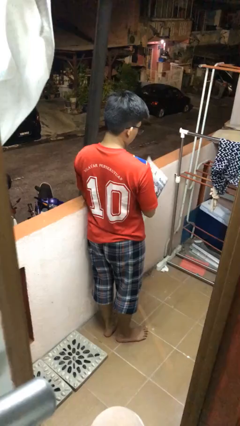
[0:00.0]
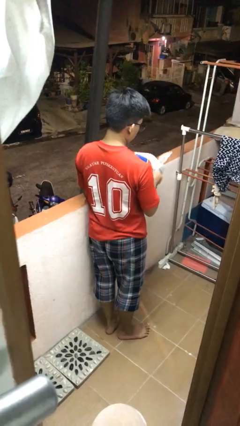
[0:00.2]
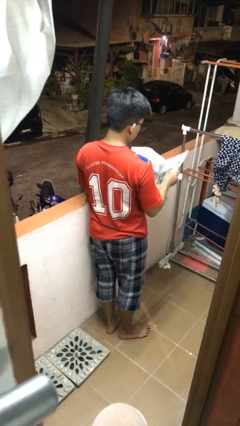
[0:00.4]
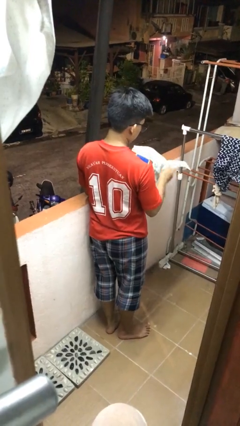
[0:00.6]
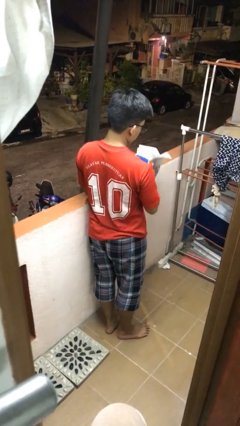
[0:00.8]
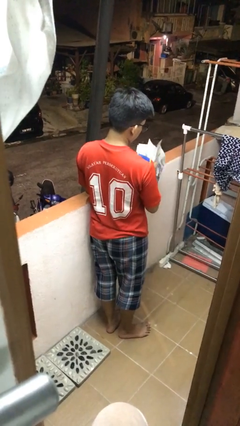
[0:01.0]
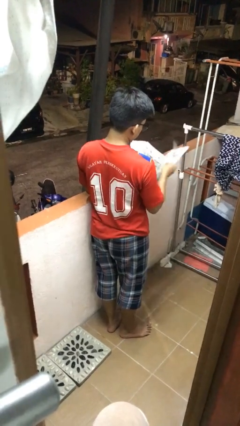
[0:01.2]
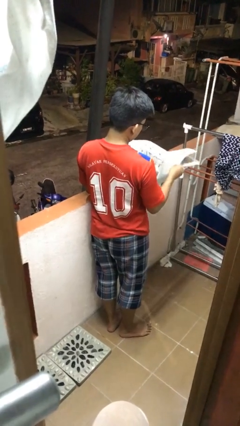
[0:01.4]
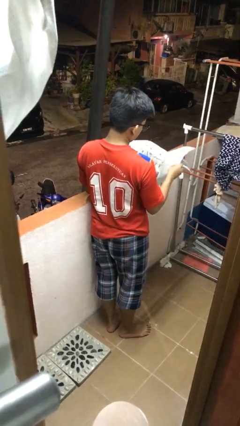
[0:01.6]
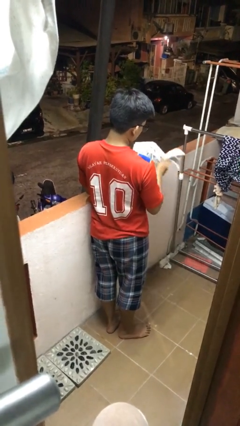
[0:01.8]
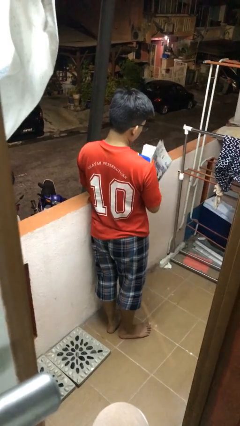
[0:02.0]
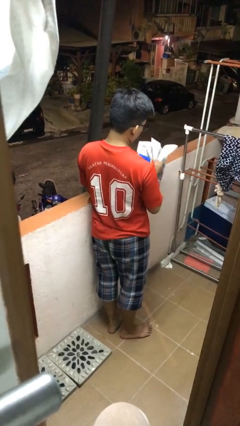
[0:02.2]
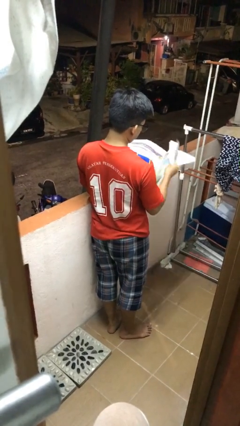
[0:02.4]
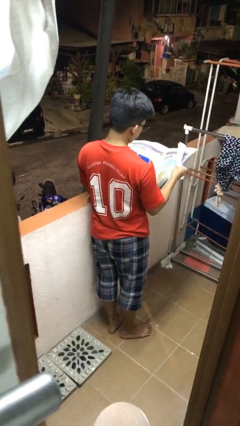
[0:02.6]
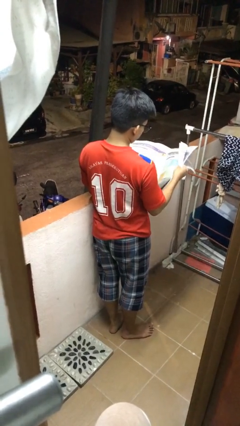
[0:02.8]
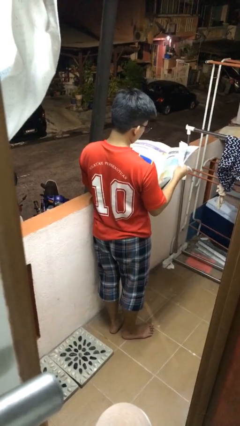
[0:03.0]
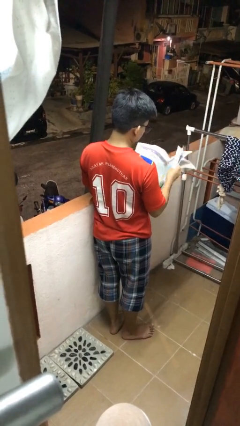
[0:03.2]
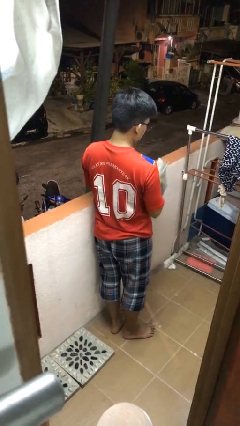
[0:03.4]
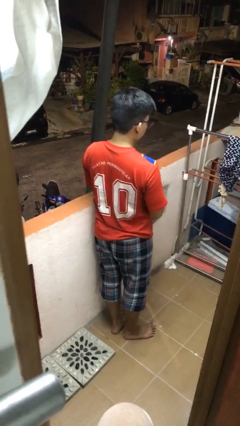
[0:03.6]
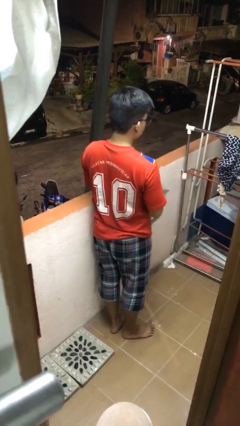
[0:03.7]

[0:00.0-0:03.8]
person reads newspaper

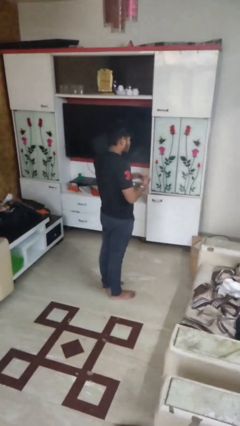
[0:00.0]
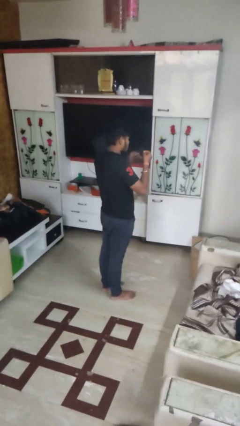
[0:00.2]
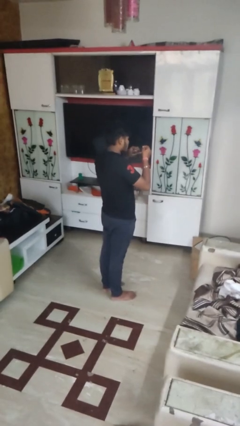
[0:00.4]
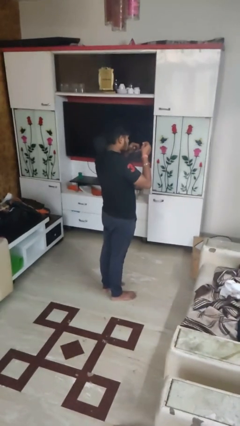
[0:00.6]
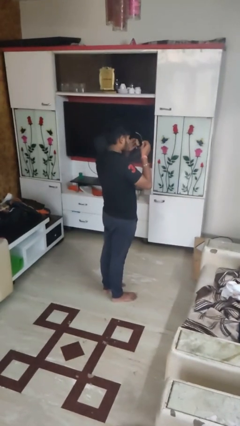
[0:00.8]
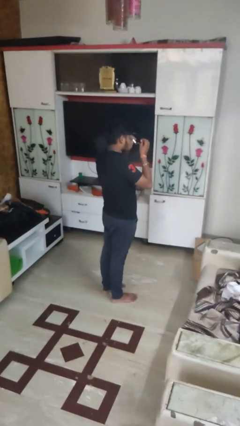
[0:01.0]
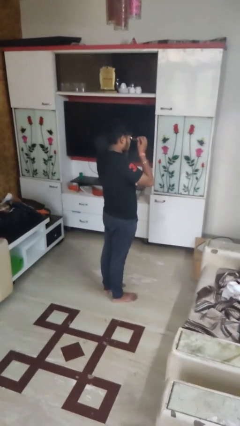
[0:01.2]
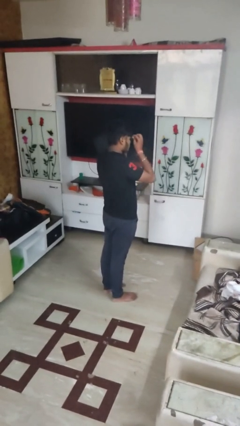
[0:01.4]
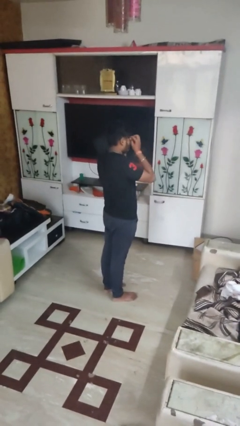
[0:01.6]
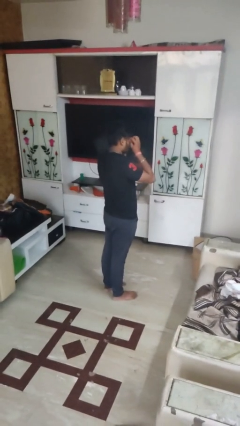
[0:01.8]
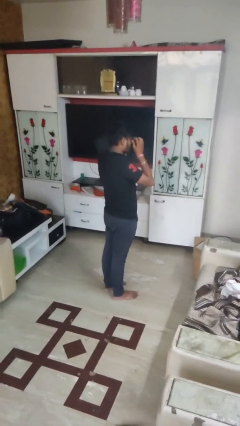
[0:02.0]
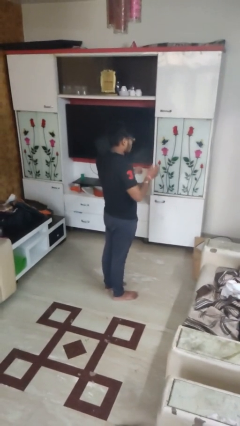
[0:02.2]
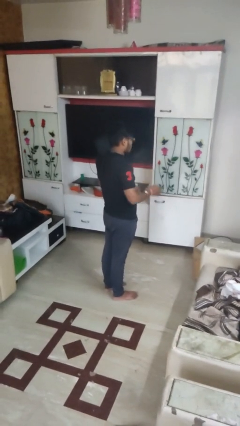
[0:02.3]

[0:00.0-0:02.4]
person puts on glasses

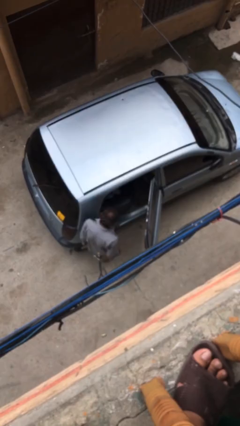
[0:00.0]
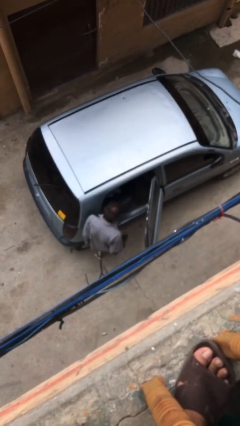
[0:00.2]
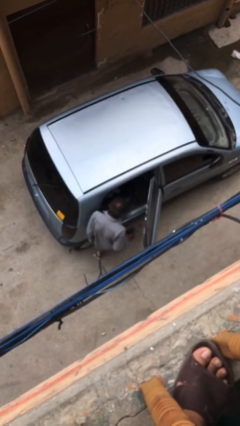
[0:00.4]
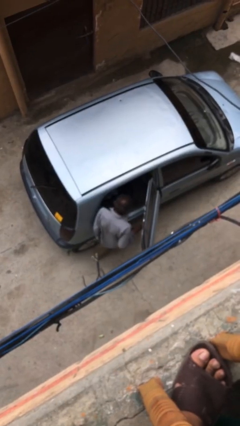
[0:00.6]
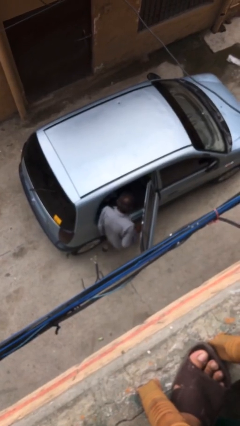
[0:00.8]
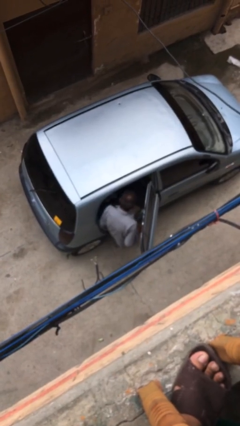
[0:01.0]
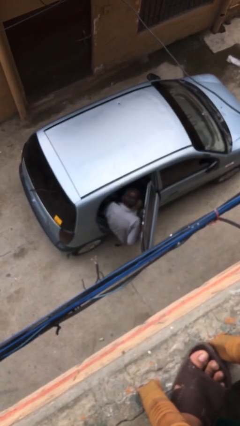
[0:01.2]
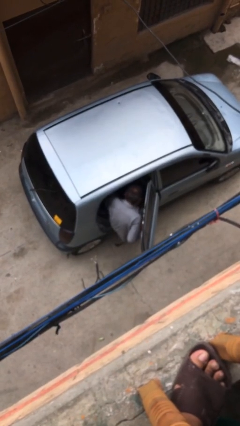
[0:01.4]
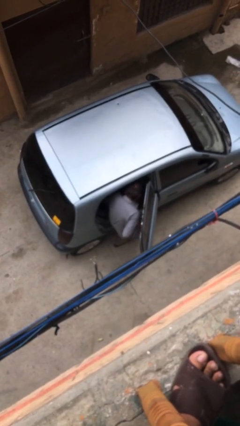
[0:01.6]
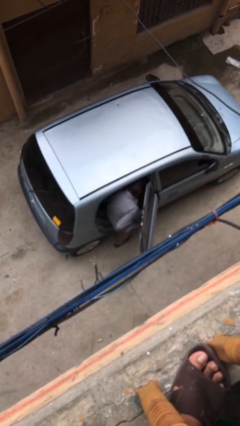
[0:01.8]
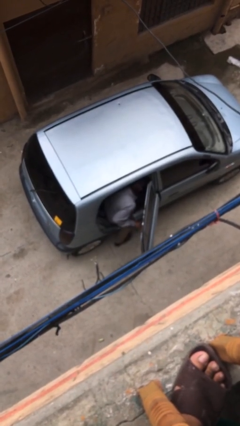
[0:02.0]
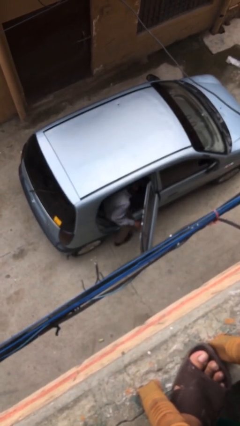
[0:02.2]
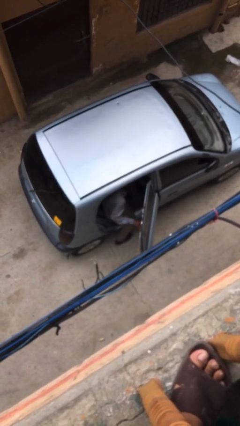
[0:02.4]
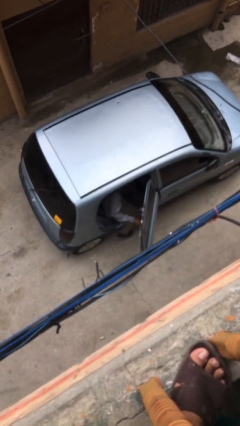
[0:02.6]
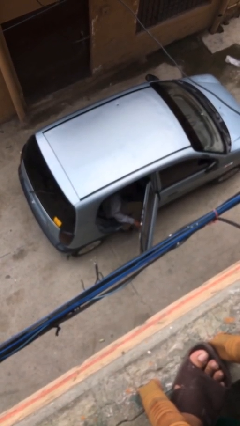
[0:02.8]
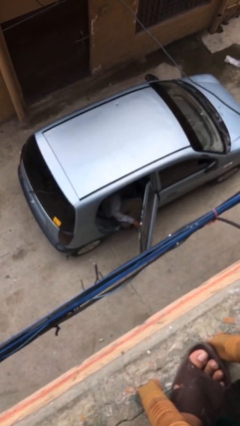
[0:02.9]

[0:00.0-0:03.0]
person enters car

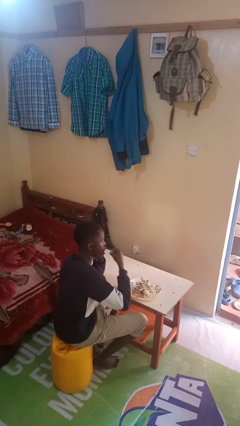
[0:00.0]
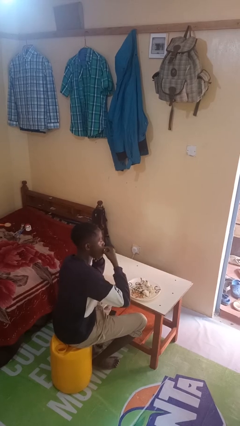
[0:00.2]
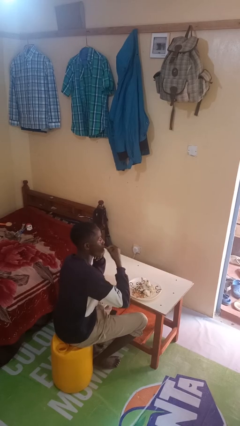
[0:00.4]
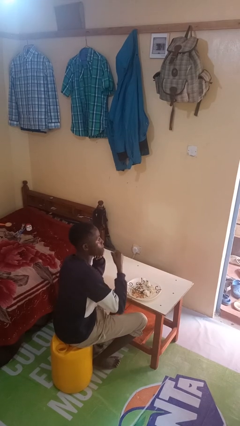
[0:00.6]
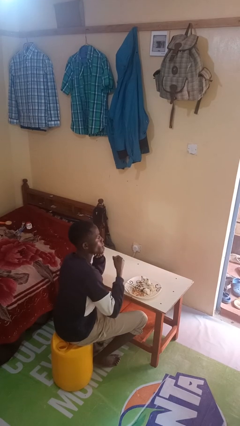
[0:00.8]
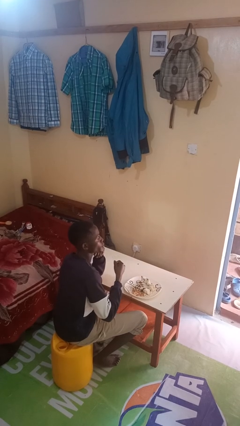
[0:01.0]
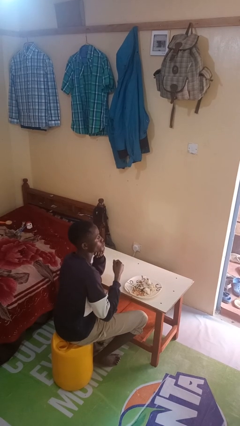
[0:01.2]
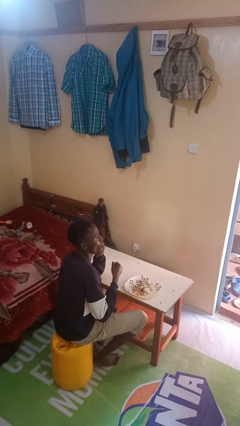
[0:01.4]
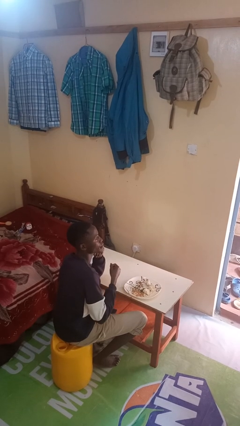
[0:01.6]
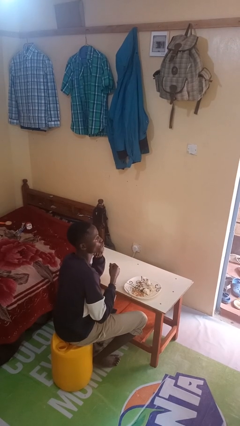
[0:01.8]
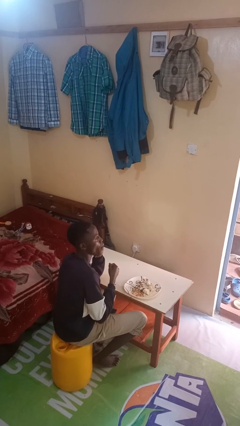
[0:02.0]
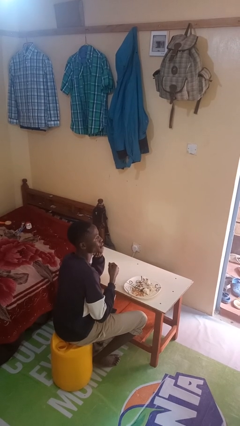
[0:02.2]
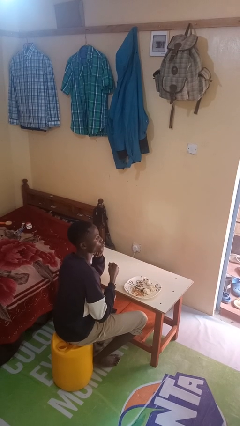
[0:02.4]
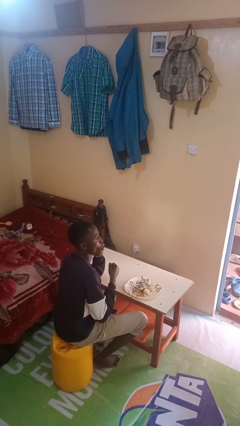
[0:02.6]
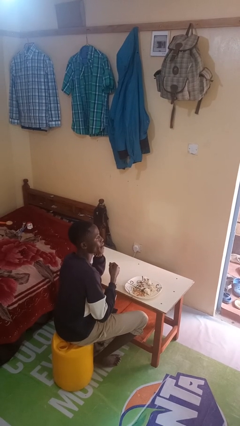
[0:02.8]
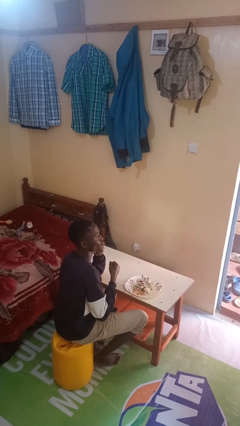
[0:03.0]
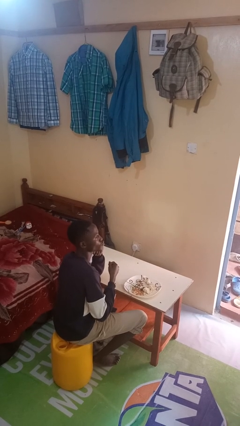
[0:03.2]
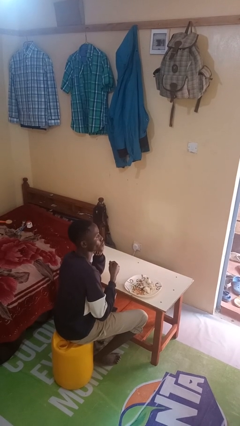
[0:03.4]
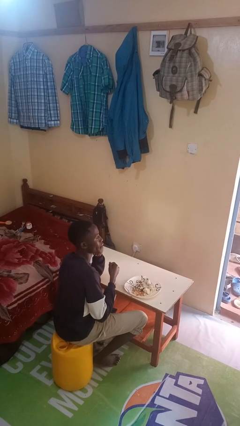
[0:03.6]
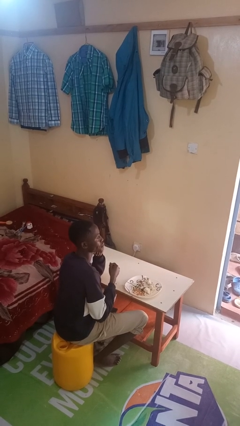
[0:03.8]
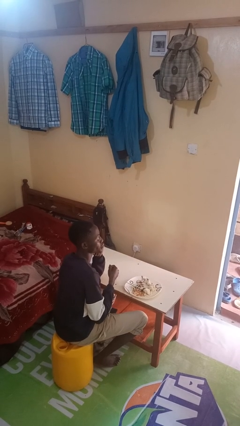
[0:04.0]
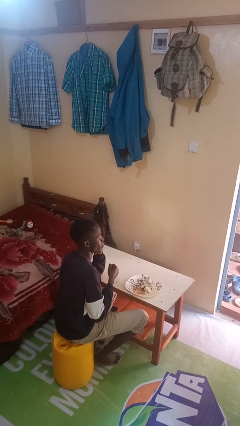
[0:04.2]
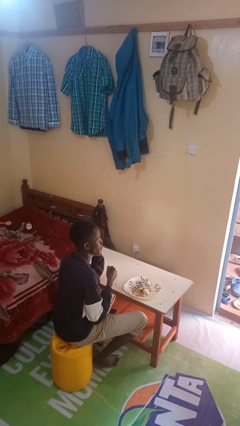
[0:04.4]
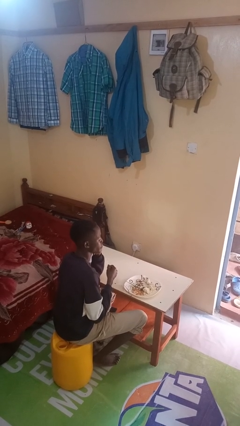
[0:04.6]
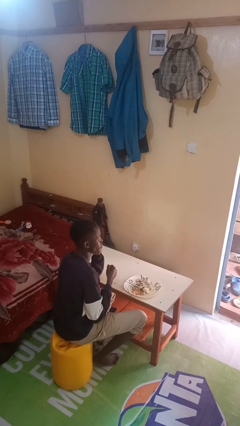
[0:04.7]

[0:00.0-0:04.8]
person eats with hands

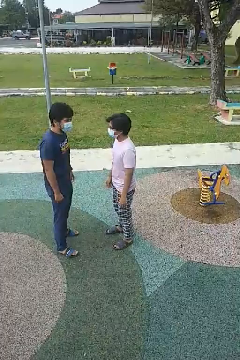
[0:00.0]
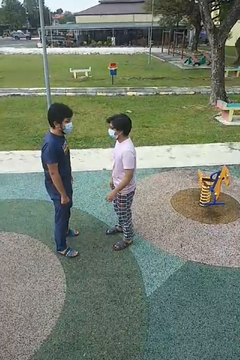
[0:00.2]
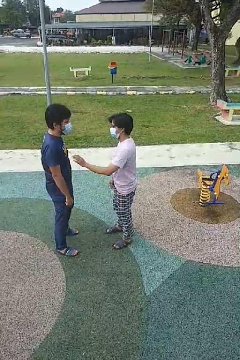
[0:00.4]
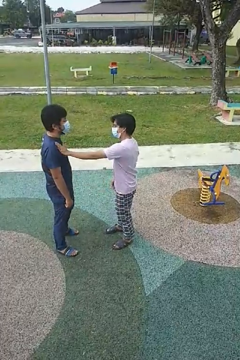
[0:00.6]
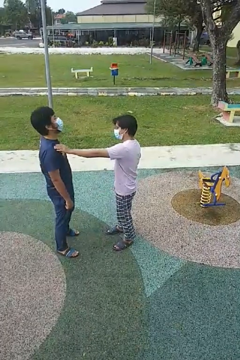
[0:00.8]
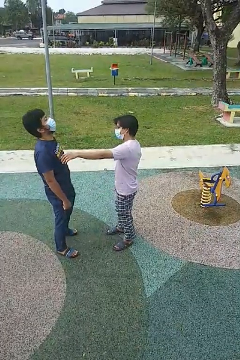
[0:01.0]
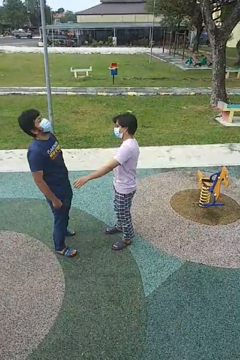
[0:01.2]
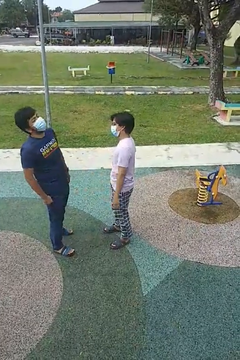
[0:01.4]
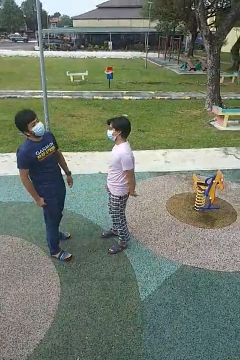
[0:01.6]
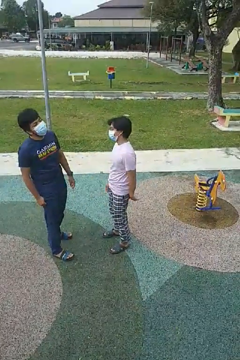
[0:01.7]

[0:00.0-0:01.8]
person shoves person

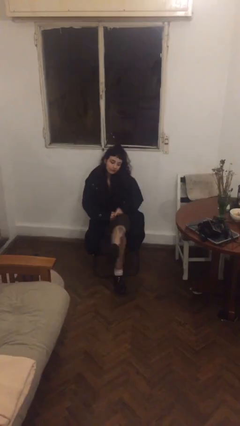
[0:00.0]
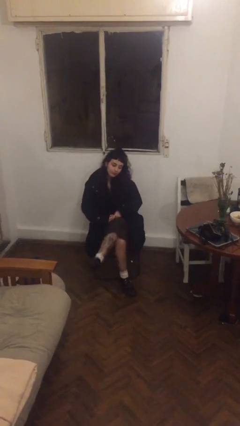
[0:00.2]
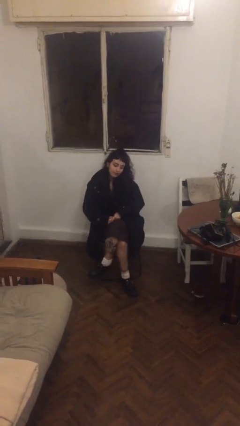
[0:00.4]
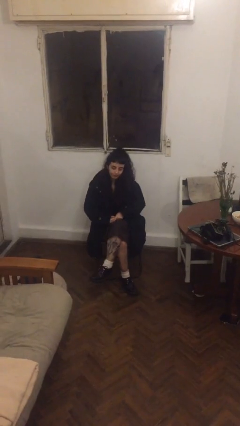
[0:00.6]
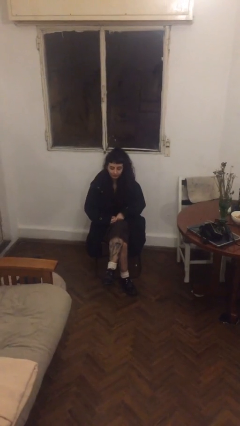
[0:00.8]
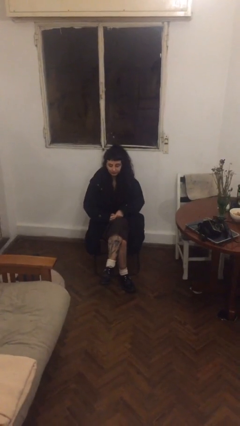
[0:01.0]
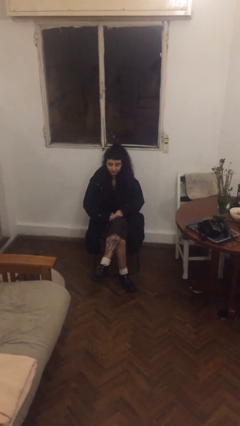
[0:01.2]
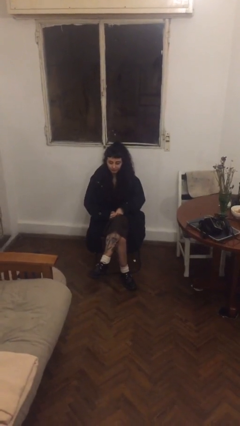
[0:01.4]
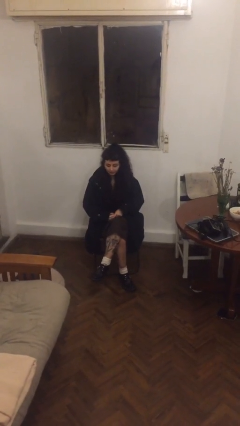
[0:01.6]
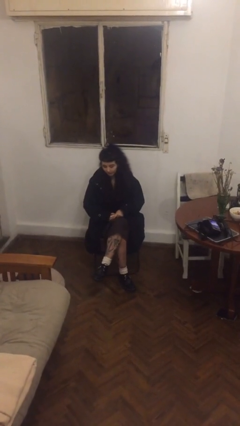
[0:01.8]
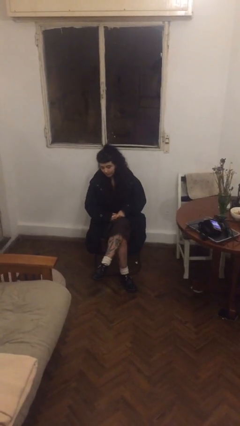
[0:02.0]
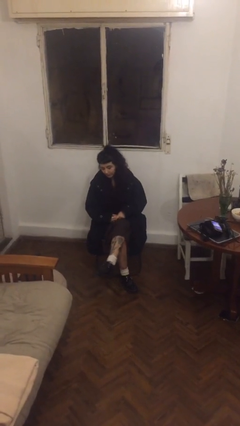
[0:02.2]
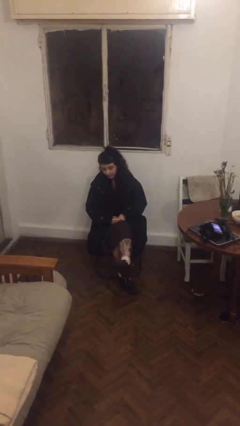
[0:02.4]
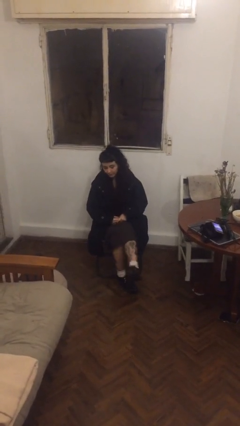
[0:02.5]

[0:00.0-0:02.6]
person crosses legs
